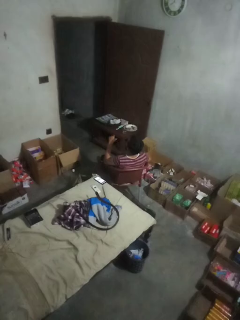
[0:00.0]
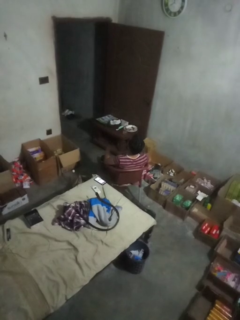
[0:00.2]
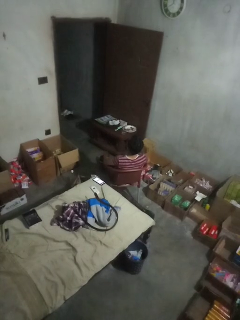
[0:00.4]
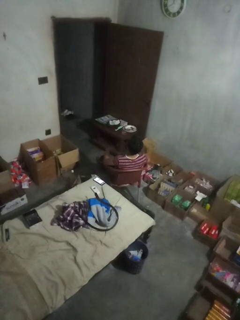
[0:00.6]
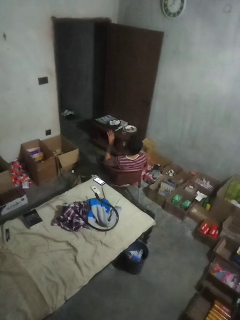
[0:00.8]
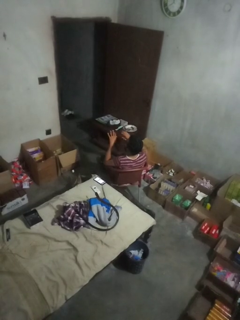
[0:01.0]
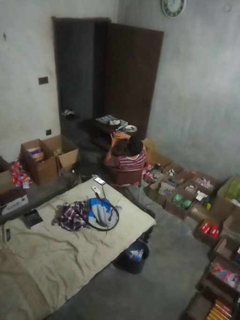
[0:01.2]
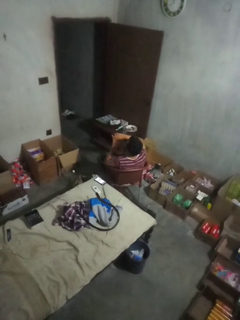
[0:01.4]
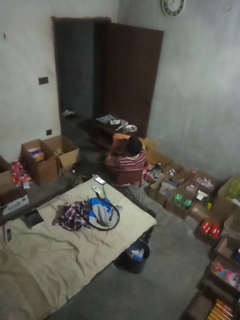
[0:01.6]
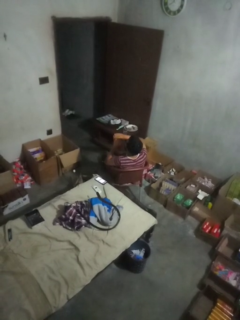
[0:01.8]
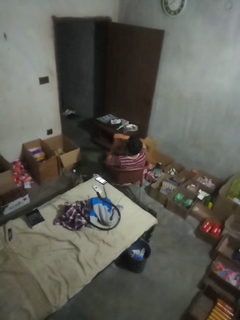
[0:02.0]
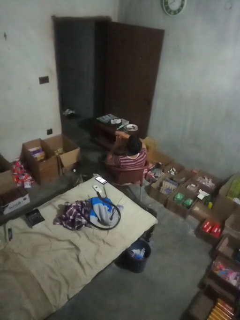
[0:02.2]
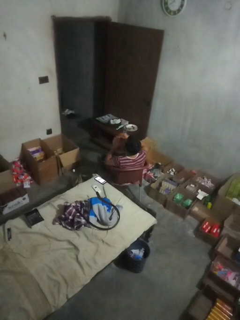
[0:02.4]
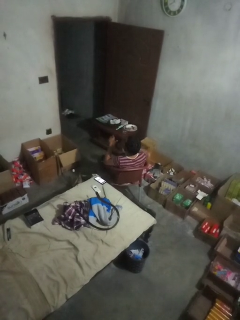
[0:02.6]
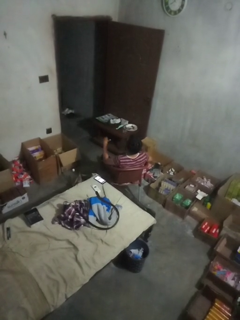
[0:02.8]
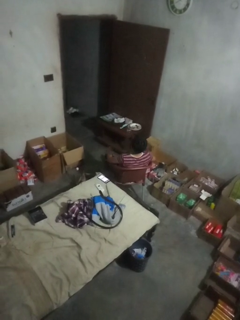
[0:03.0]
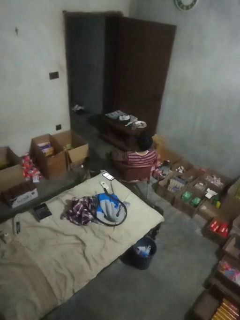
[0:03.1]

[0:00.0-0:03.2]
person takes off ring

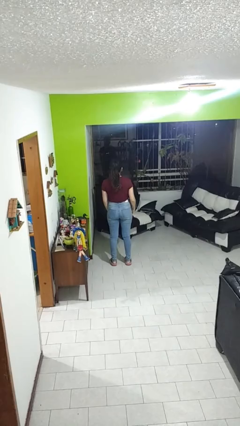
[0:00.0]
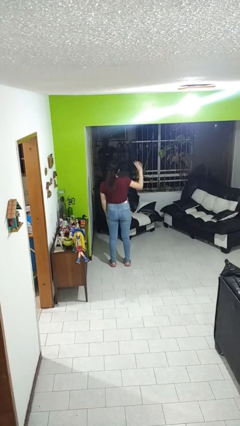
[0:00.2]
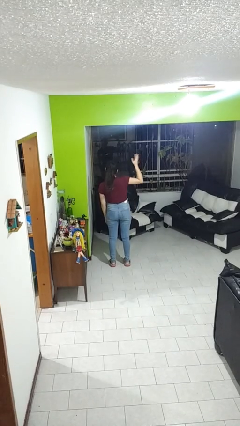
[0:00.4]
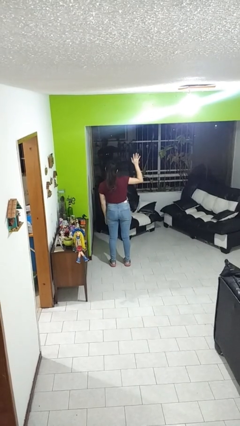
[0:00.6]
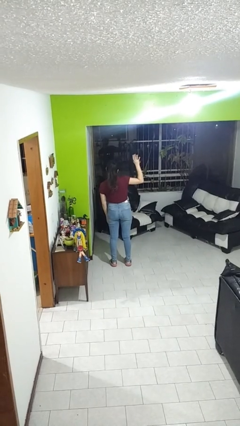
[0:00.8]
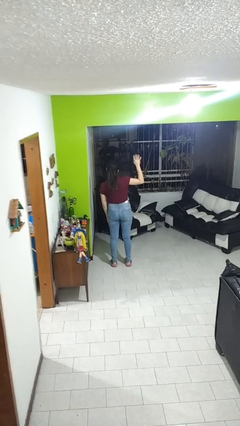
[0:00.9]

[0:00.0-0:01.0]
person waves at person

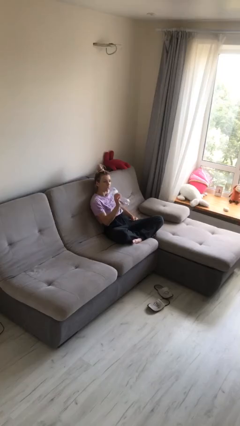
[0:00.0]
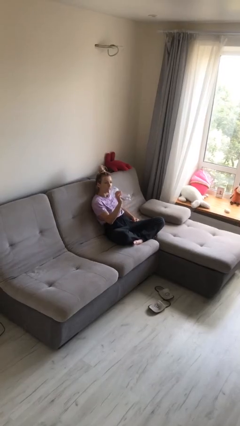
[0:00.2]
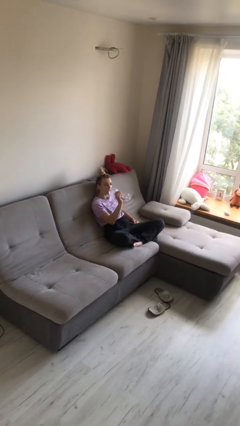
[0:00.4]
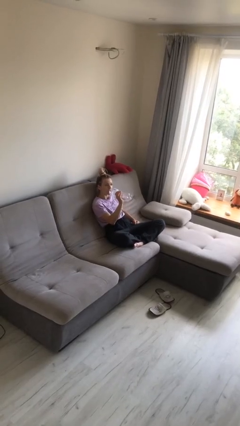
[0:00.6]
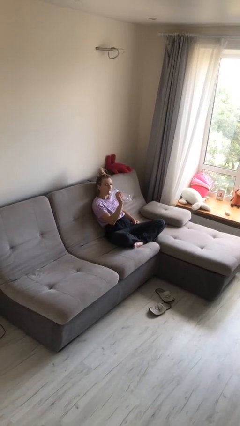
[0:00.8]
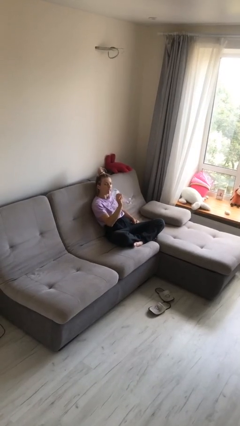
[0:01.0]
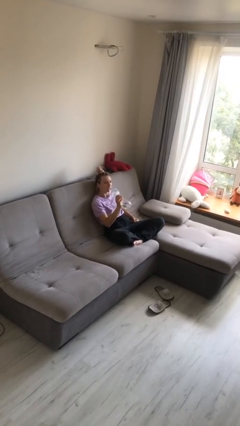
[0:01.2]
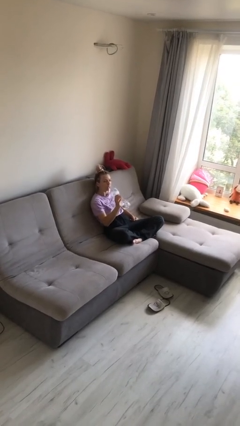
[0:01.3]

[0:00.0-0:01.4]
person drinks from bottle

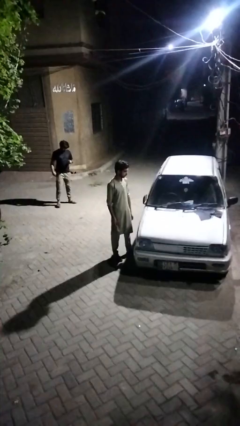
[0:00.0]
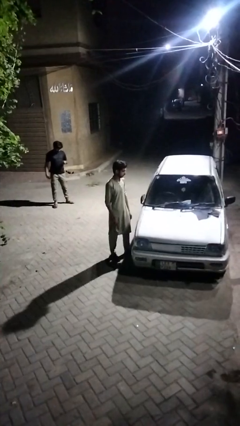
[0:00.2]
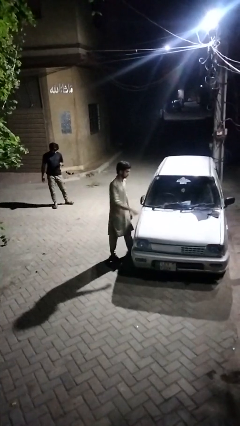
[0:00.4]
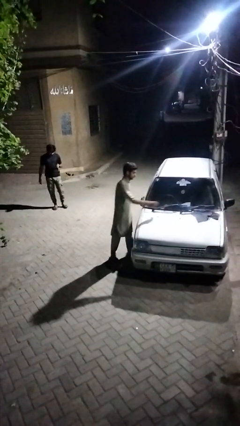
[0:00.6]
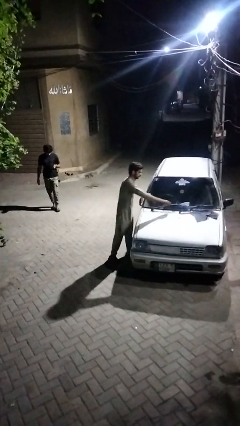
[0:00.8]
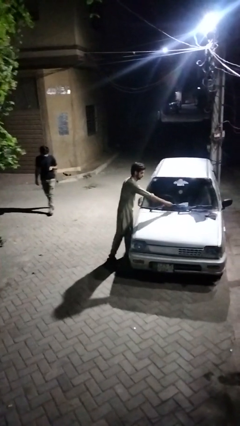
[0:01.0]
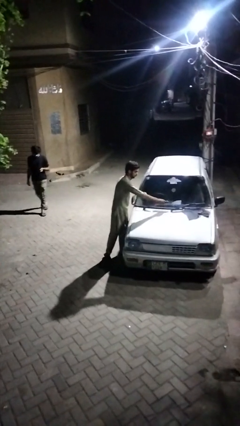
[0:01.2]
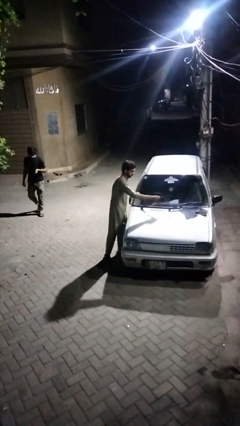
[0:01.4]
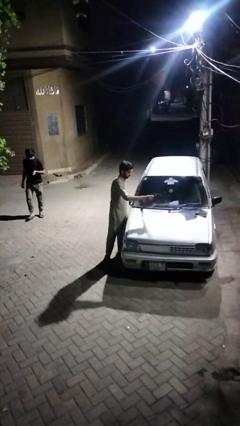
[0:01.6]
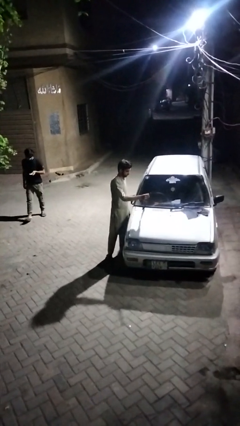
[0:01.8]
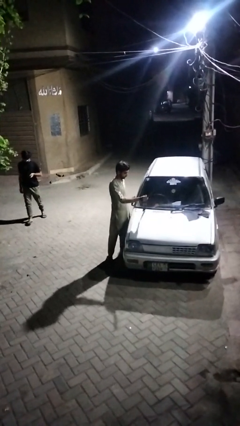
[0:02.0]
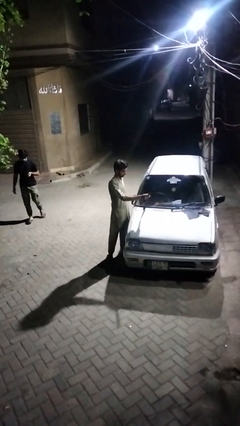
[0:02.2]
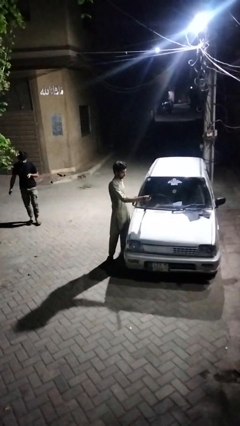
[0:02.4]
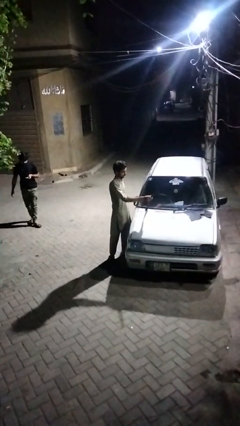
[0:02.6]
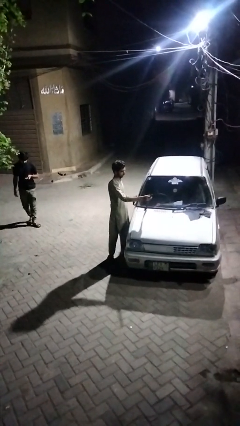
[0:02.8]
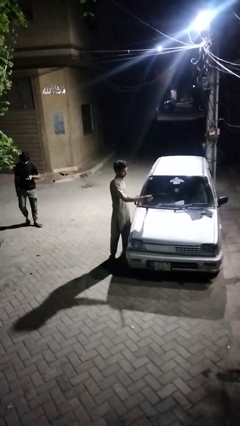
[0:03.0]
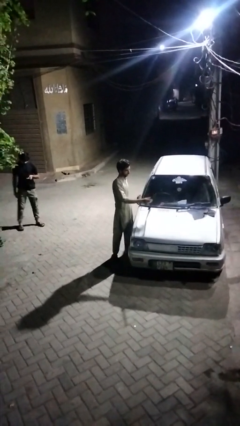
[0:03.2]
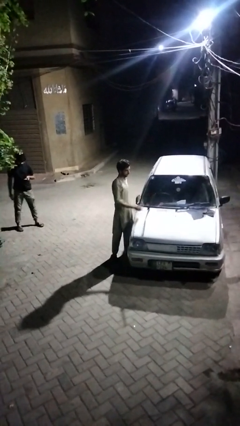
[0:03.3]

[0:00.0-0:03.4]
person flips up car wipers

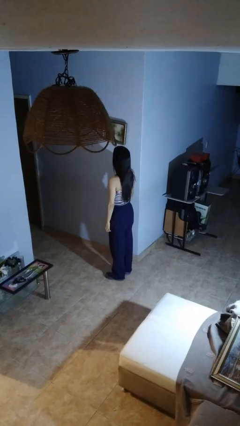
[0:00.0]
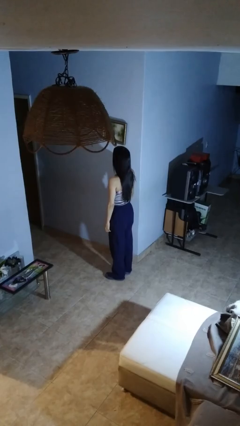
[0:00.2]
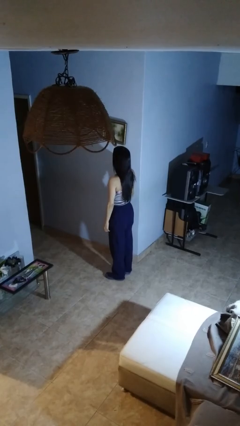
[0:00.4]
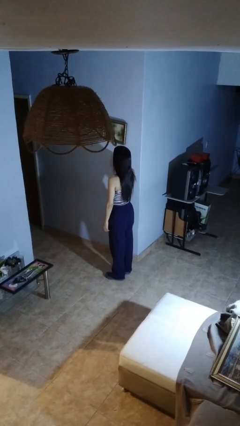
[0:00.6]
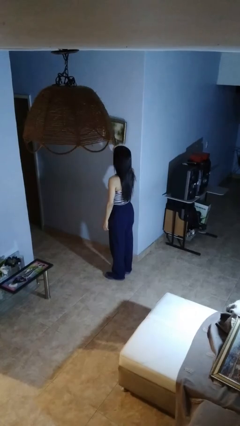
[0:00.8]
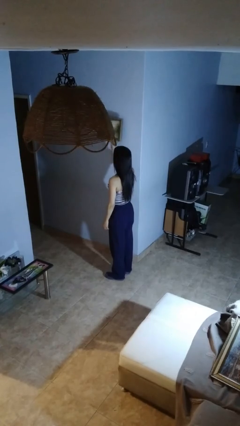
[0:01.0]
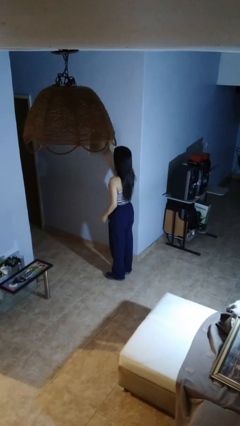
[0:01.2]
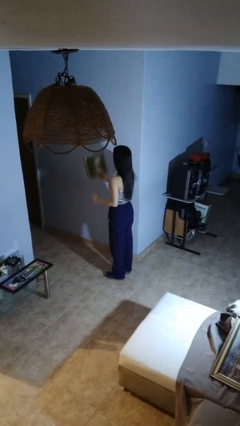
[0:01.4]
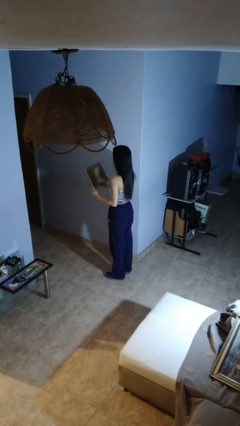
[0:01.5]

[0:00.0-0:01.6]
person takes down picture frame

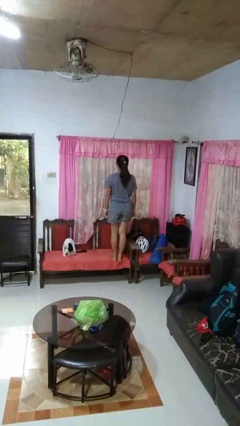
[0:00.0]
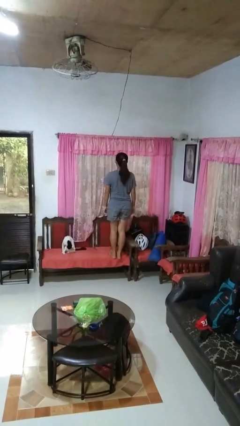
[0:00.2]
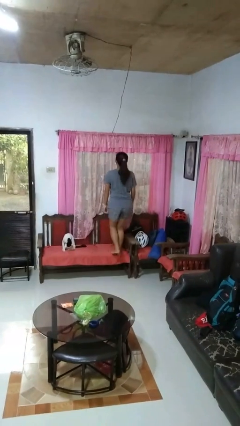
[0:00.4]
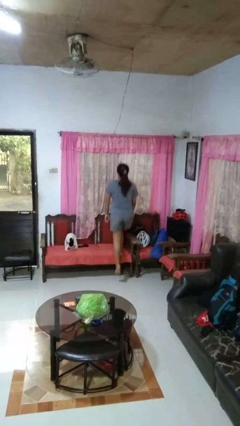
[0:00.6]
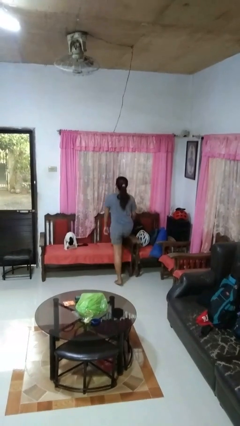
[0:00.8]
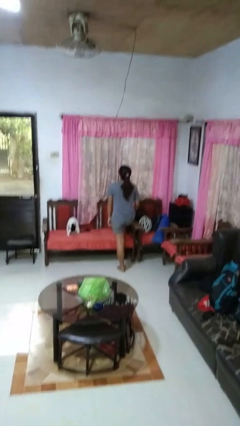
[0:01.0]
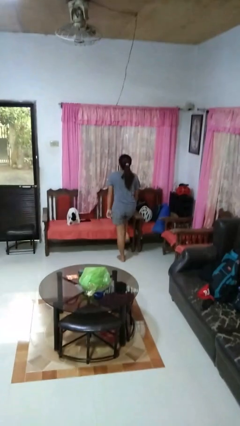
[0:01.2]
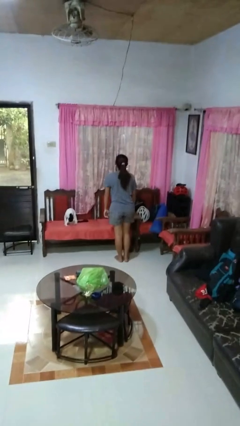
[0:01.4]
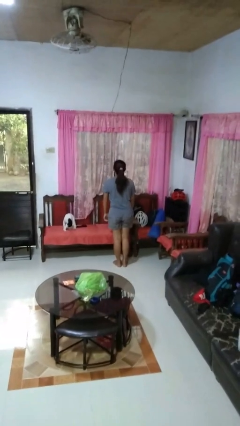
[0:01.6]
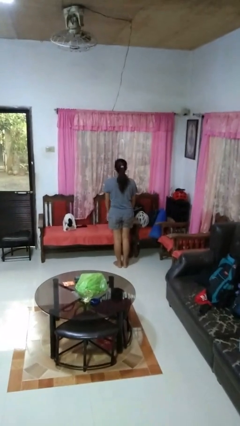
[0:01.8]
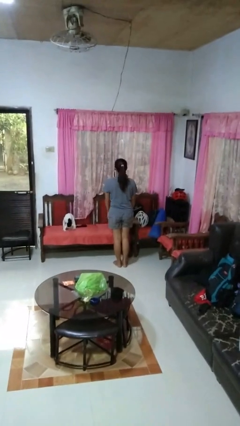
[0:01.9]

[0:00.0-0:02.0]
person climbs off chair

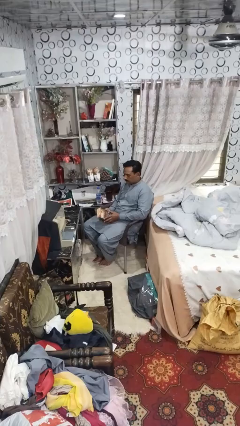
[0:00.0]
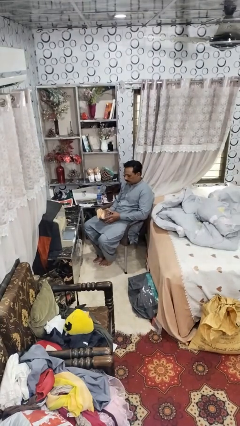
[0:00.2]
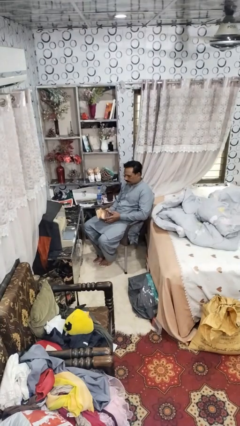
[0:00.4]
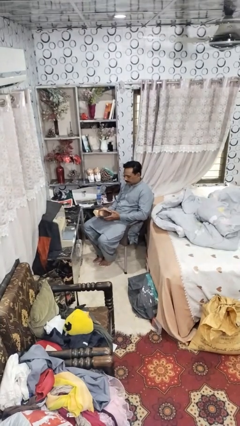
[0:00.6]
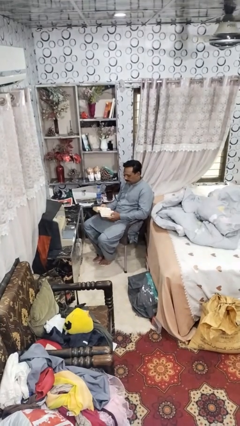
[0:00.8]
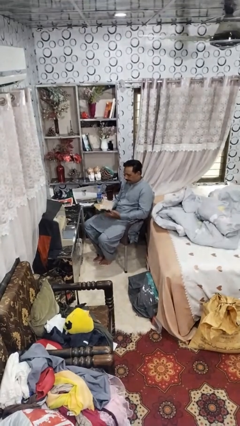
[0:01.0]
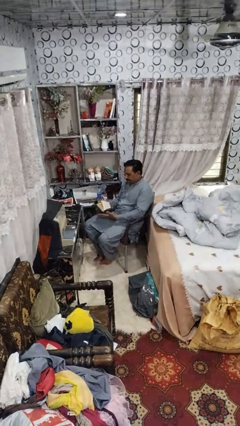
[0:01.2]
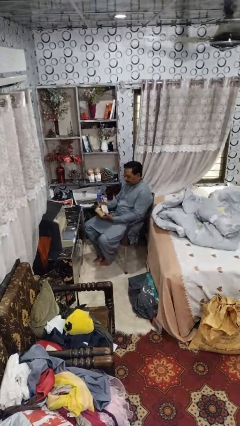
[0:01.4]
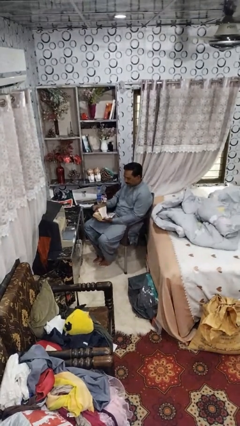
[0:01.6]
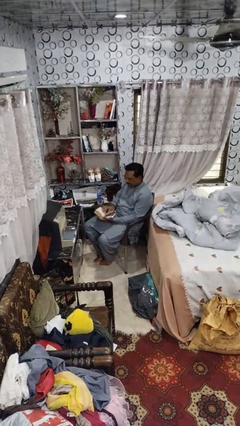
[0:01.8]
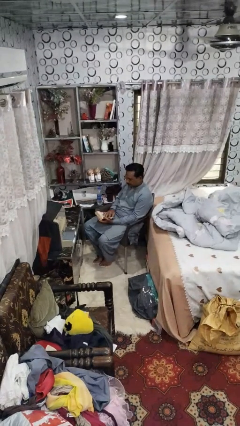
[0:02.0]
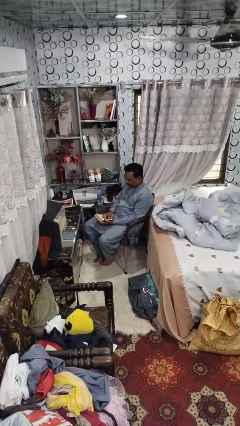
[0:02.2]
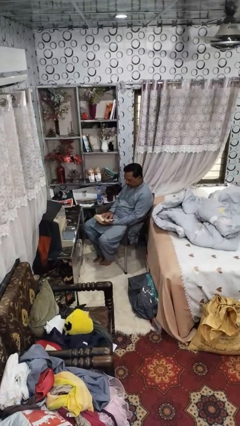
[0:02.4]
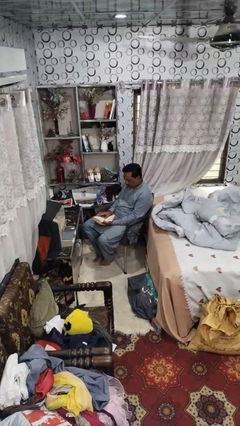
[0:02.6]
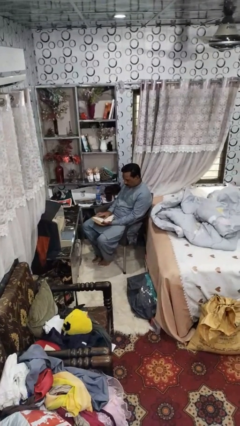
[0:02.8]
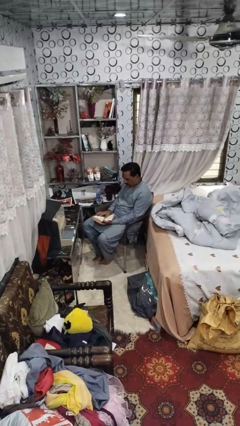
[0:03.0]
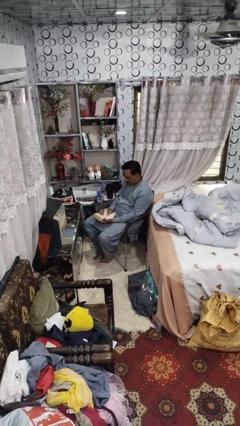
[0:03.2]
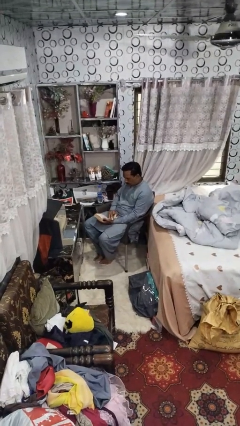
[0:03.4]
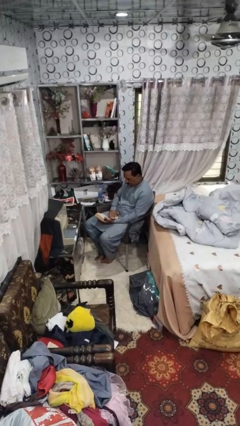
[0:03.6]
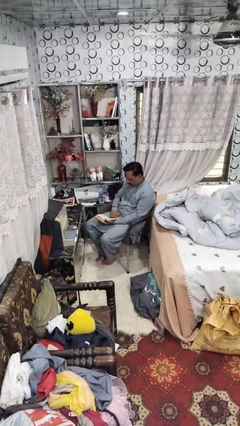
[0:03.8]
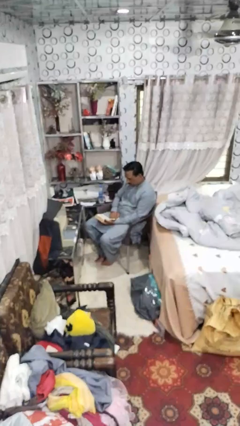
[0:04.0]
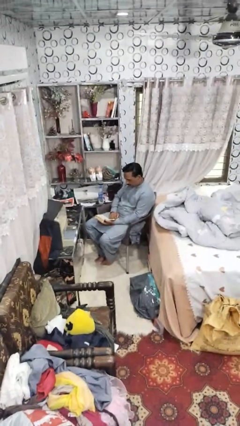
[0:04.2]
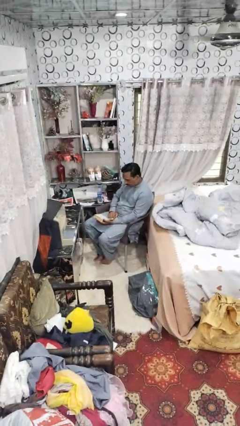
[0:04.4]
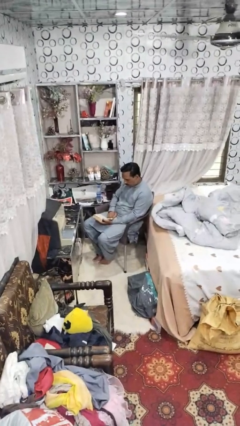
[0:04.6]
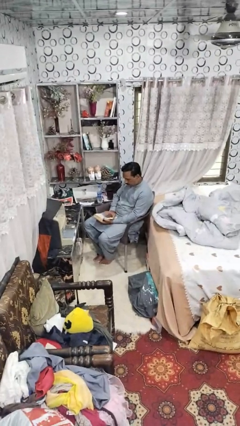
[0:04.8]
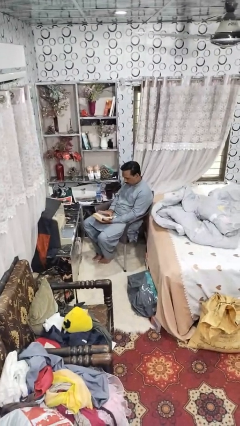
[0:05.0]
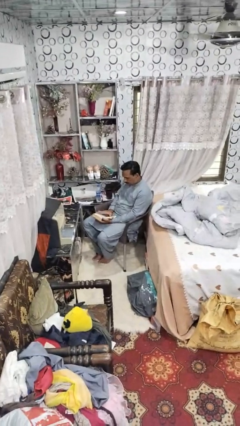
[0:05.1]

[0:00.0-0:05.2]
person reads book

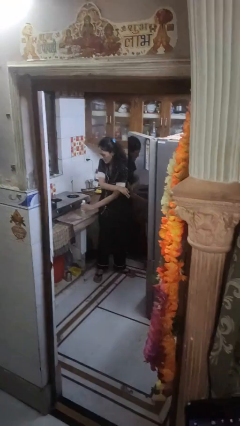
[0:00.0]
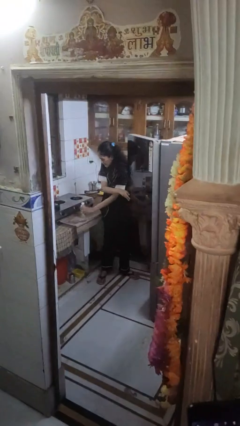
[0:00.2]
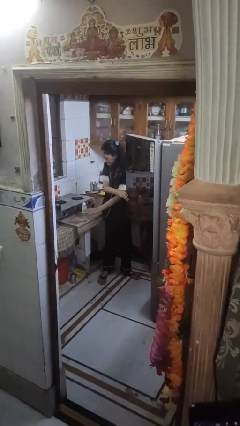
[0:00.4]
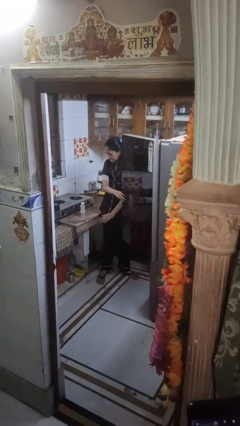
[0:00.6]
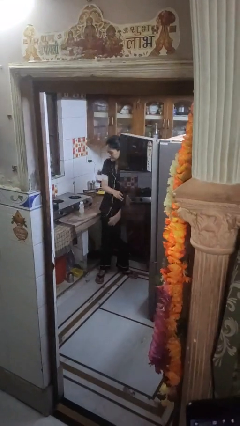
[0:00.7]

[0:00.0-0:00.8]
person takes object from refrigerator
